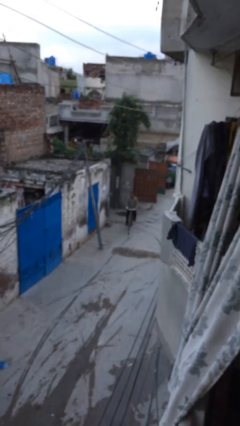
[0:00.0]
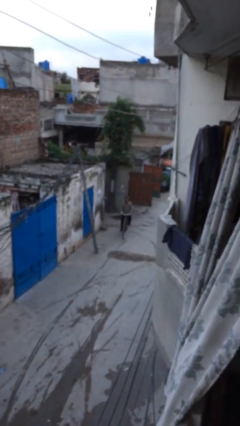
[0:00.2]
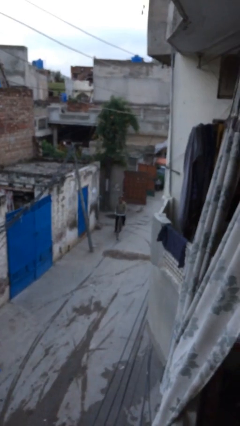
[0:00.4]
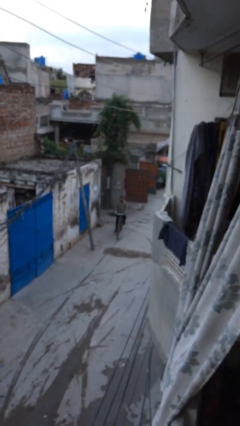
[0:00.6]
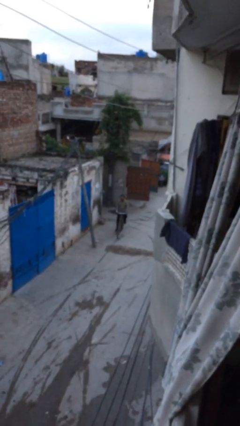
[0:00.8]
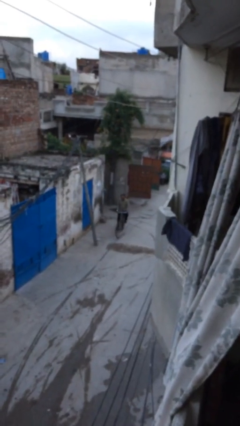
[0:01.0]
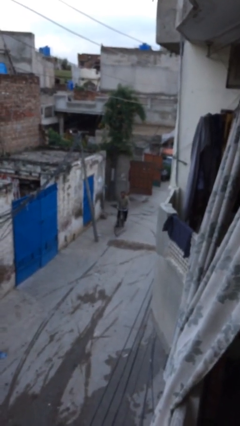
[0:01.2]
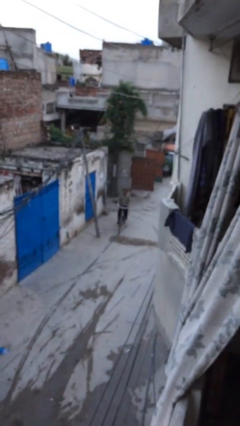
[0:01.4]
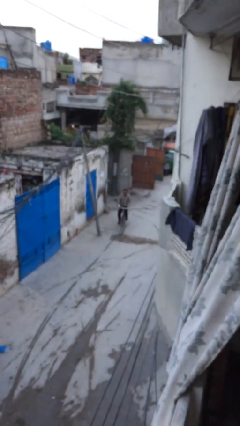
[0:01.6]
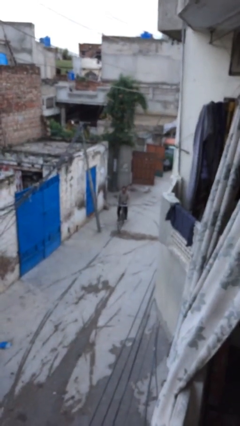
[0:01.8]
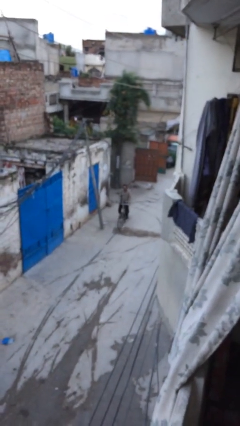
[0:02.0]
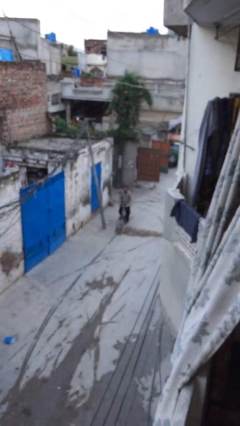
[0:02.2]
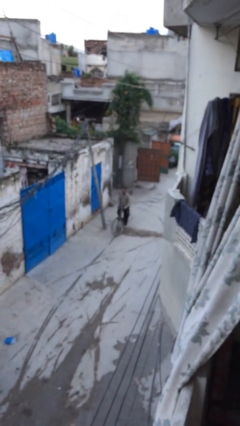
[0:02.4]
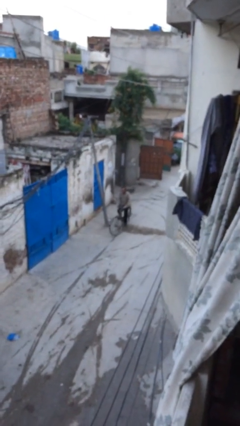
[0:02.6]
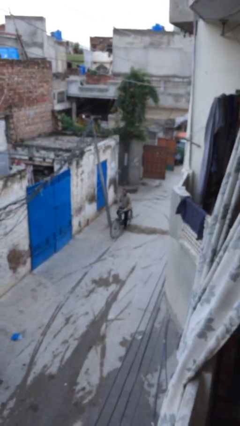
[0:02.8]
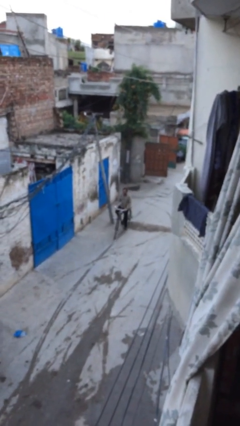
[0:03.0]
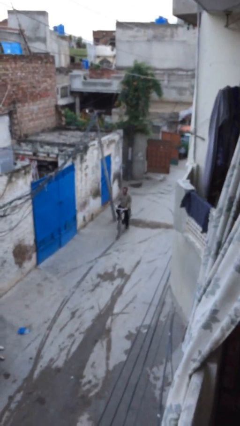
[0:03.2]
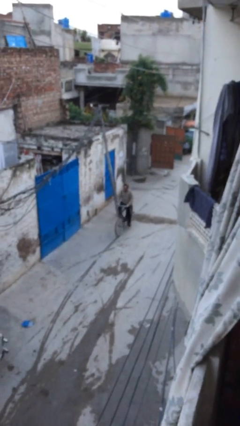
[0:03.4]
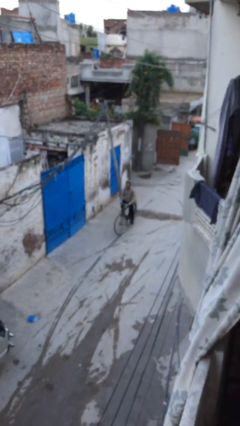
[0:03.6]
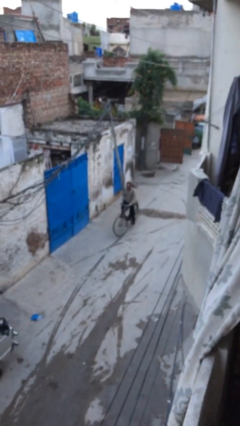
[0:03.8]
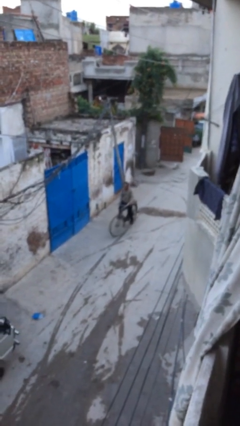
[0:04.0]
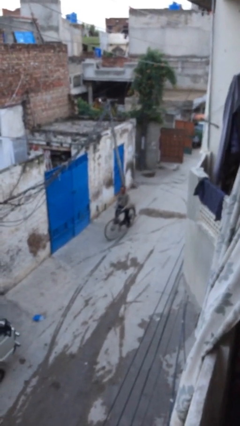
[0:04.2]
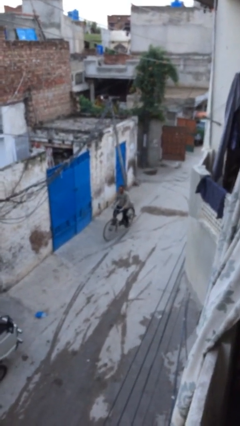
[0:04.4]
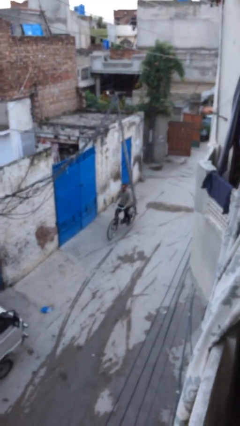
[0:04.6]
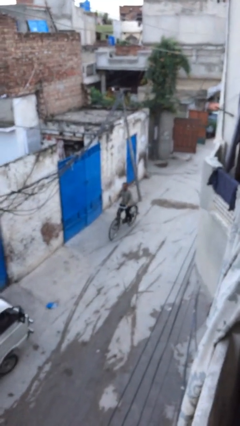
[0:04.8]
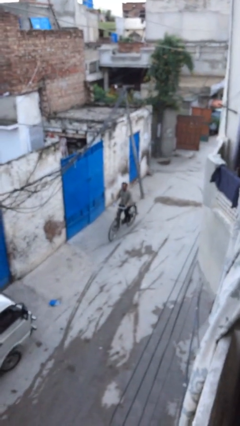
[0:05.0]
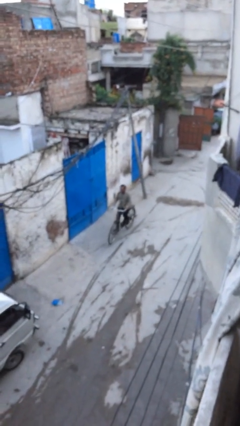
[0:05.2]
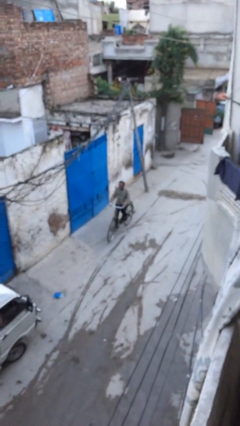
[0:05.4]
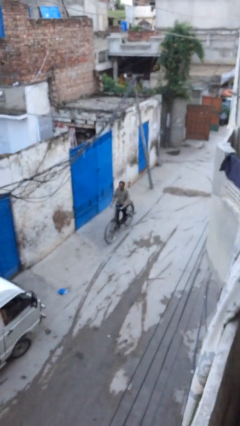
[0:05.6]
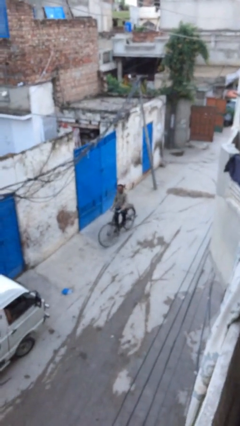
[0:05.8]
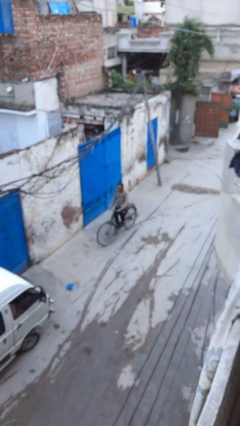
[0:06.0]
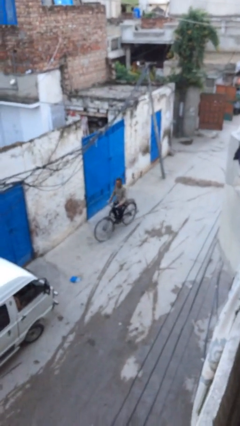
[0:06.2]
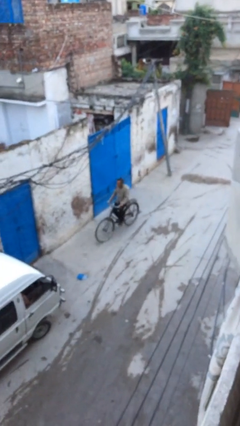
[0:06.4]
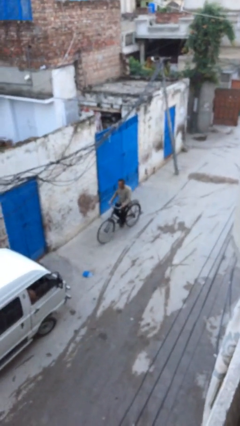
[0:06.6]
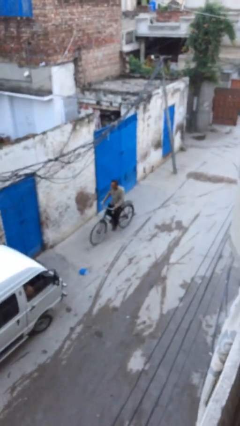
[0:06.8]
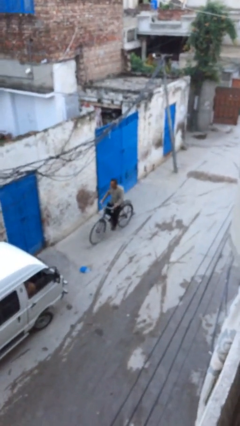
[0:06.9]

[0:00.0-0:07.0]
person rides bicycle

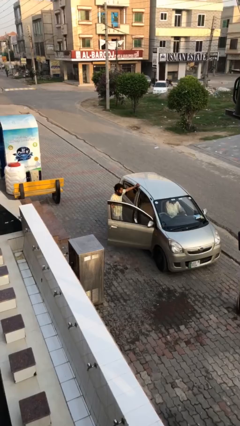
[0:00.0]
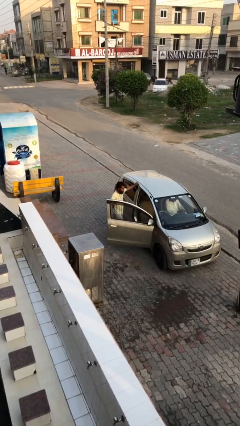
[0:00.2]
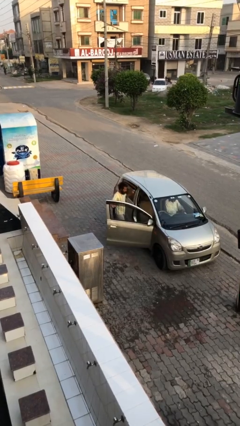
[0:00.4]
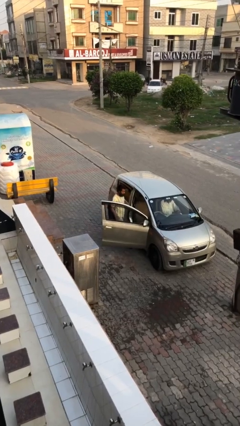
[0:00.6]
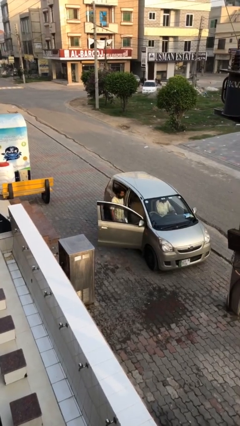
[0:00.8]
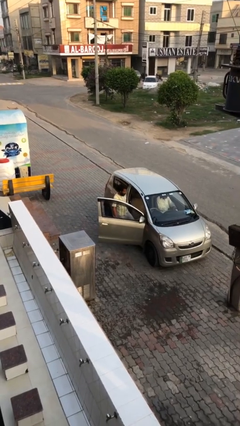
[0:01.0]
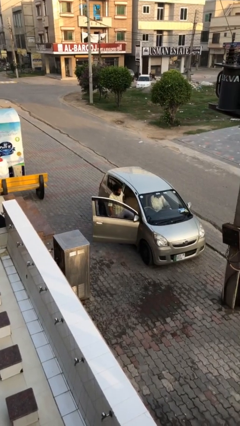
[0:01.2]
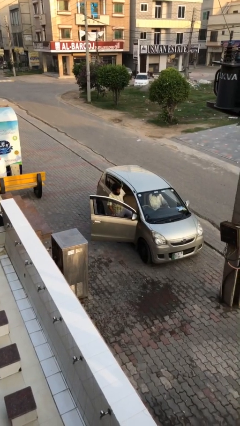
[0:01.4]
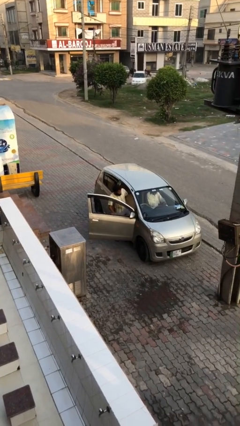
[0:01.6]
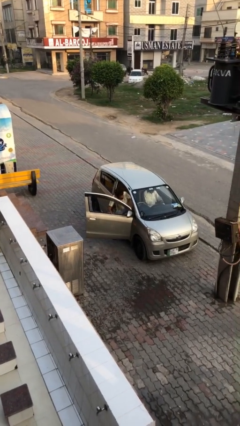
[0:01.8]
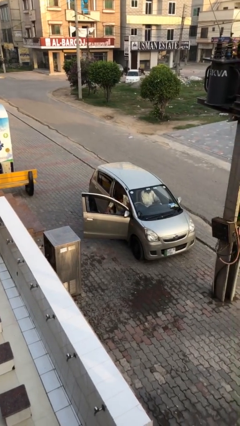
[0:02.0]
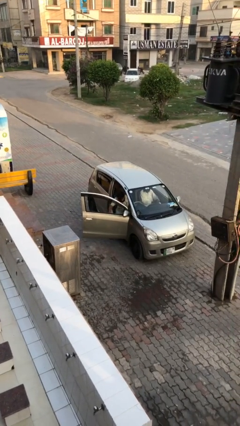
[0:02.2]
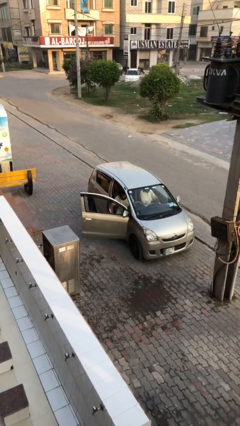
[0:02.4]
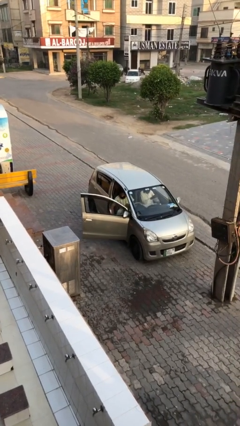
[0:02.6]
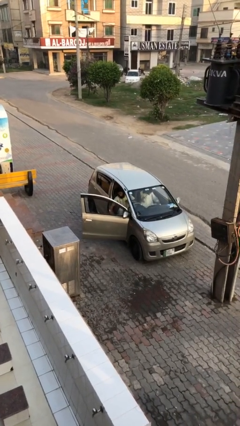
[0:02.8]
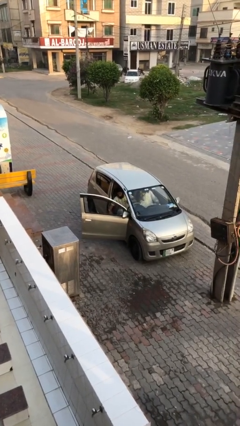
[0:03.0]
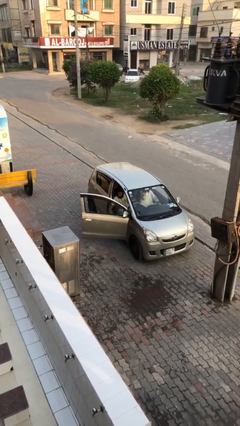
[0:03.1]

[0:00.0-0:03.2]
person enters car

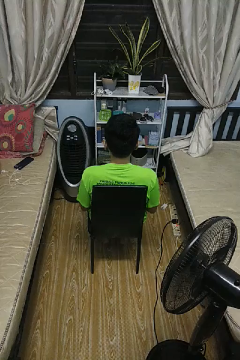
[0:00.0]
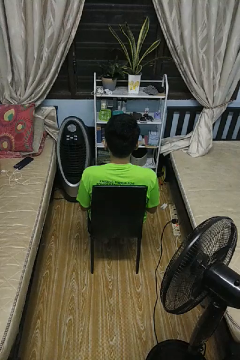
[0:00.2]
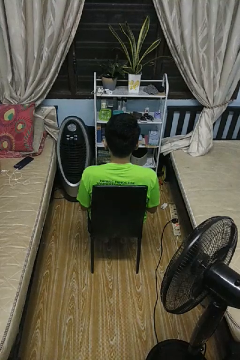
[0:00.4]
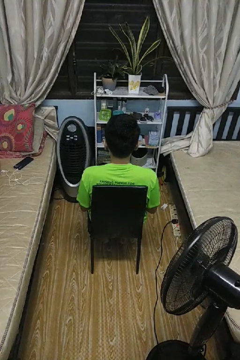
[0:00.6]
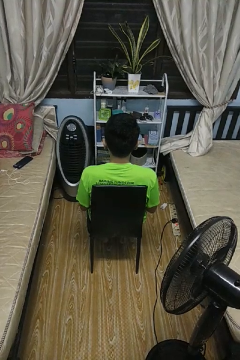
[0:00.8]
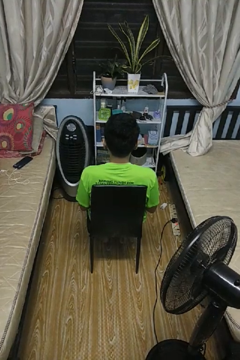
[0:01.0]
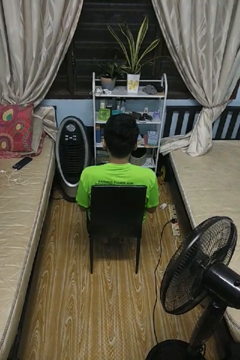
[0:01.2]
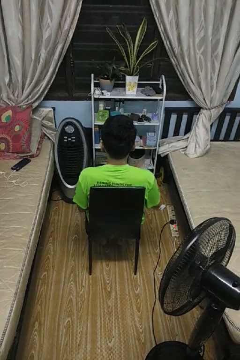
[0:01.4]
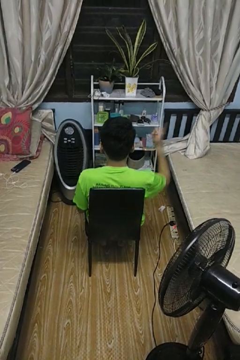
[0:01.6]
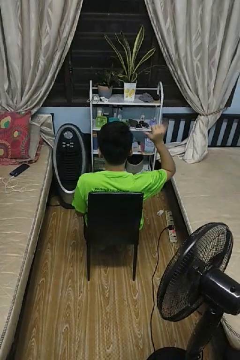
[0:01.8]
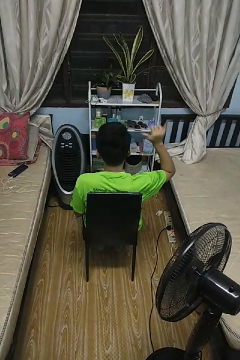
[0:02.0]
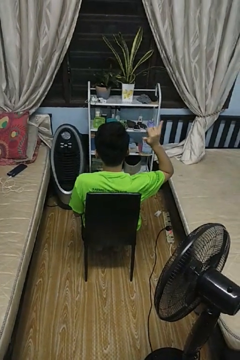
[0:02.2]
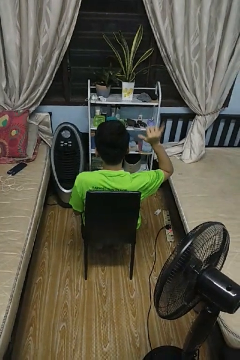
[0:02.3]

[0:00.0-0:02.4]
person gestures hang loose

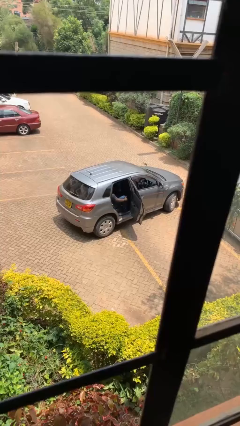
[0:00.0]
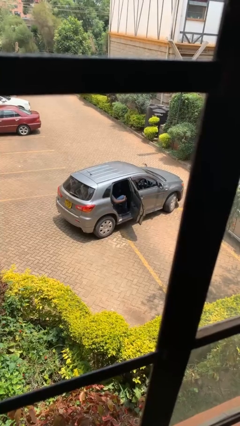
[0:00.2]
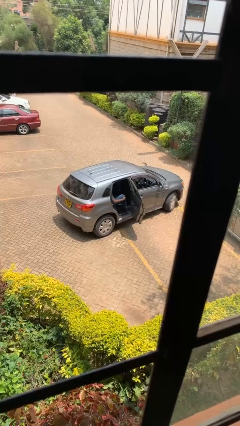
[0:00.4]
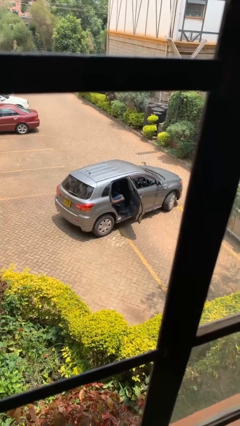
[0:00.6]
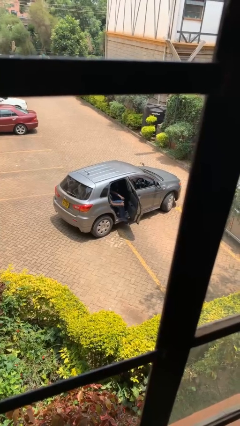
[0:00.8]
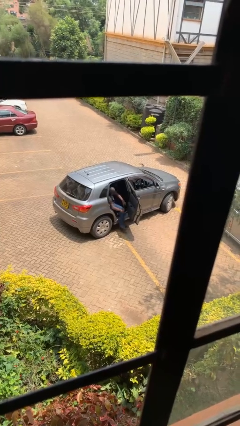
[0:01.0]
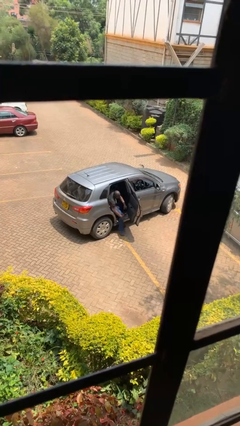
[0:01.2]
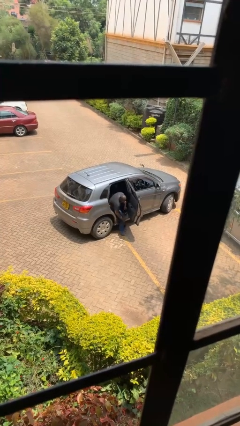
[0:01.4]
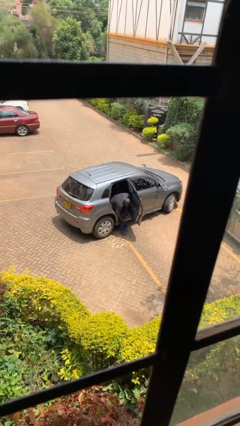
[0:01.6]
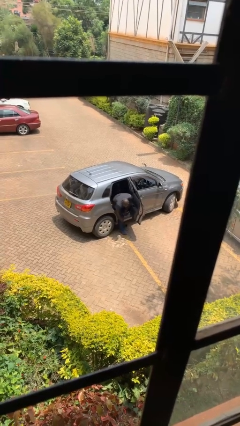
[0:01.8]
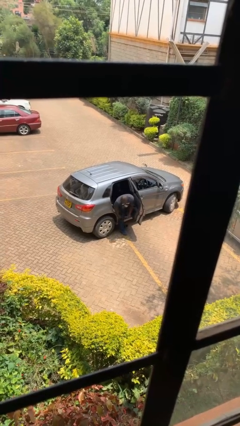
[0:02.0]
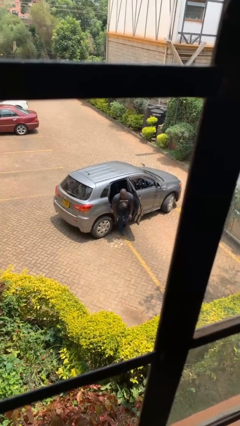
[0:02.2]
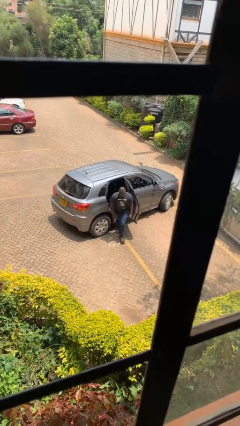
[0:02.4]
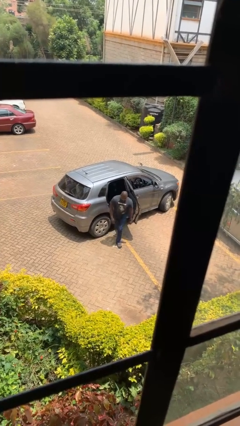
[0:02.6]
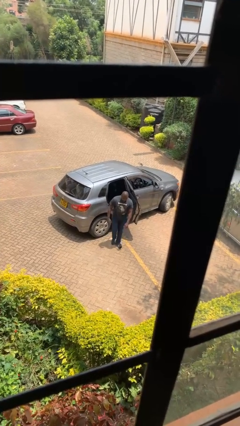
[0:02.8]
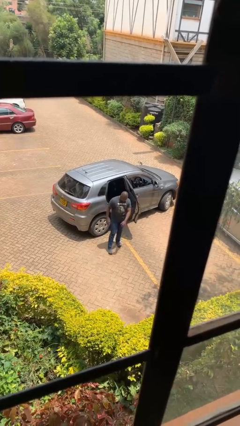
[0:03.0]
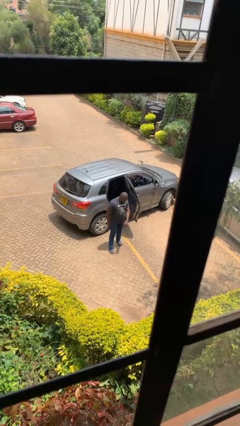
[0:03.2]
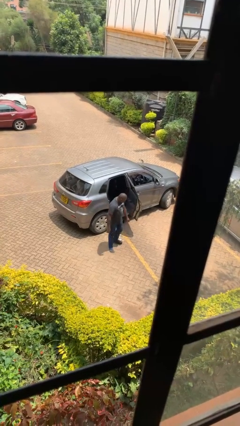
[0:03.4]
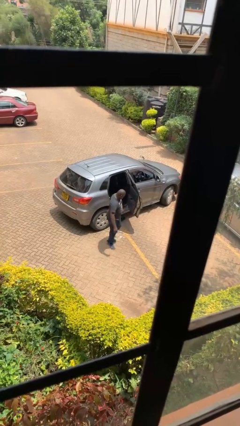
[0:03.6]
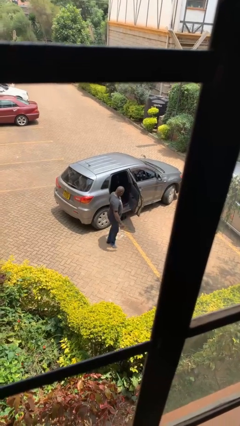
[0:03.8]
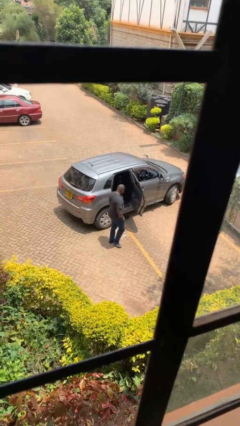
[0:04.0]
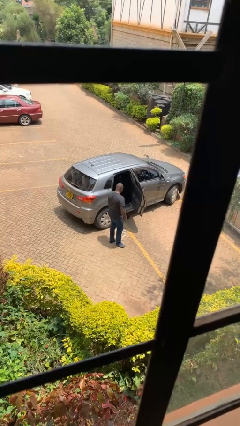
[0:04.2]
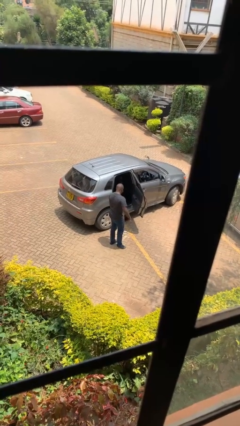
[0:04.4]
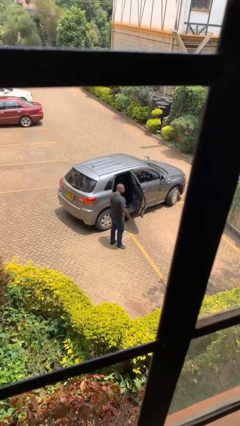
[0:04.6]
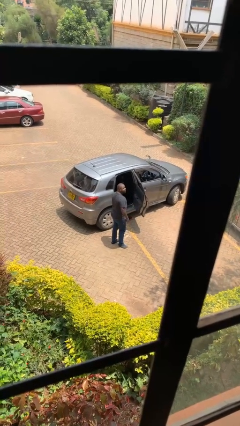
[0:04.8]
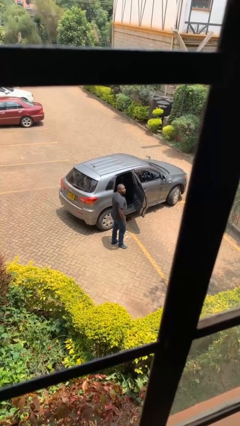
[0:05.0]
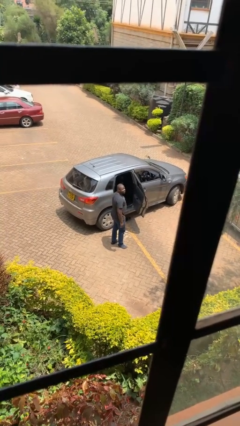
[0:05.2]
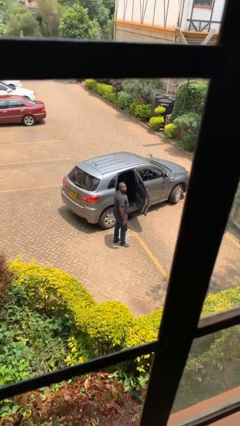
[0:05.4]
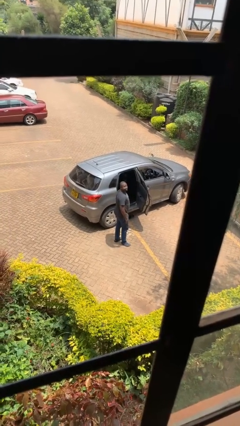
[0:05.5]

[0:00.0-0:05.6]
person exits car
